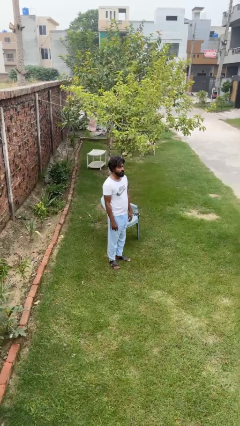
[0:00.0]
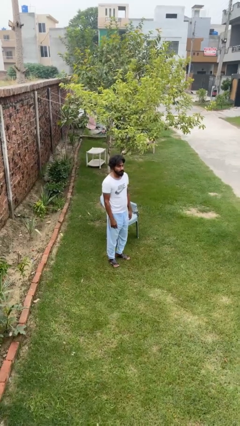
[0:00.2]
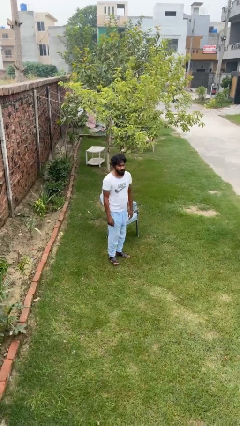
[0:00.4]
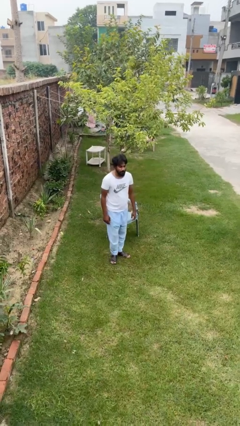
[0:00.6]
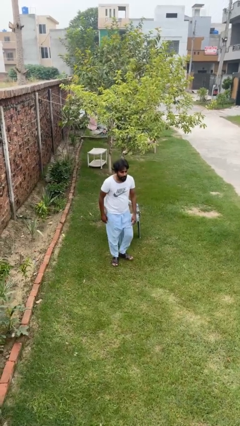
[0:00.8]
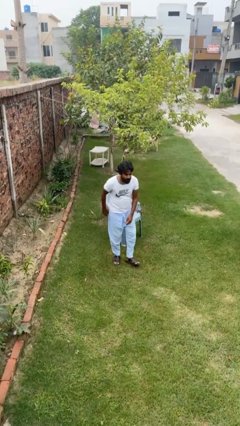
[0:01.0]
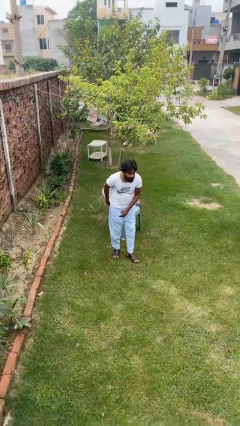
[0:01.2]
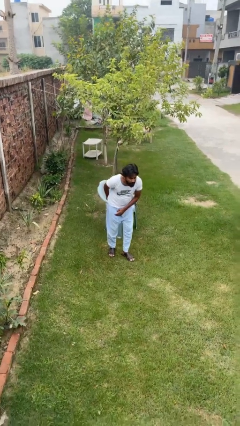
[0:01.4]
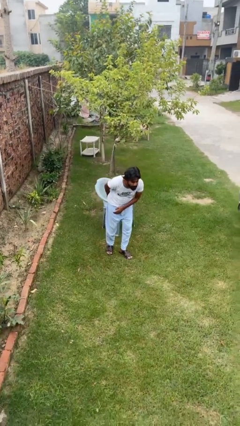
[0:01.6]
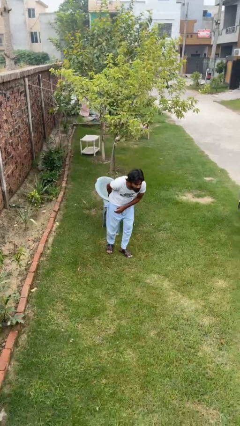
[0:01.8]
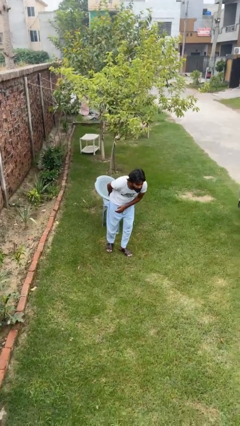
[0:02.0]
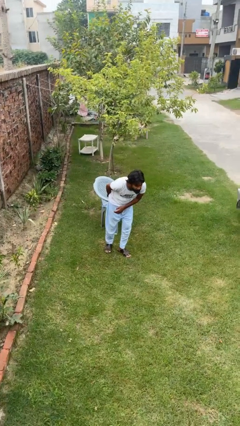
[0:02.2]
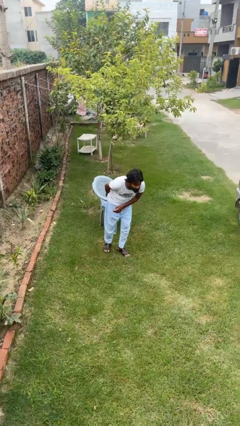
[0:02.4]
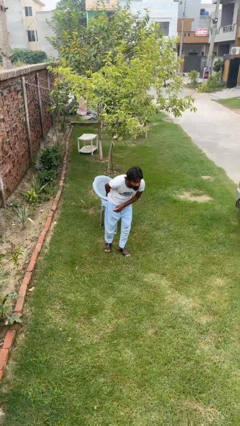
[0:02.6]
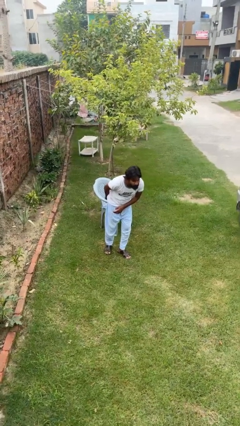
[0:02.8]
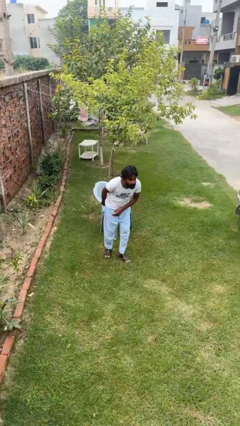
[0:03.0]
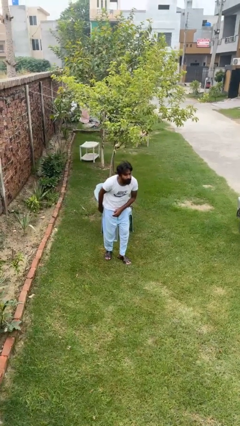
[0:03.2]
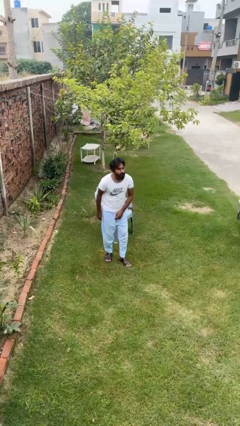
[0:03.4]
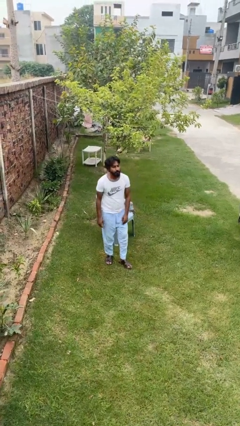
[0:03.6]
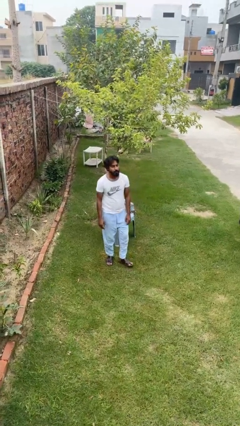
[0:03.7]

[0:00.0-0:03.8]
person bows

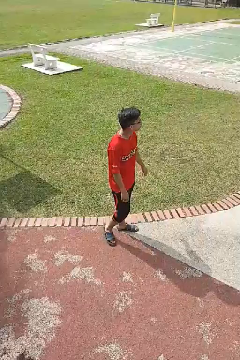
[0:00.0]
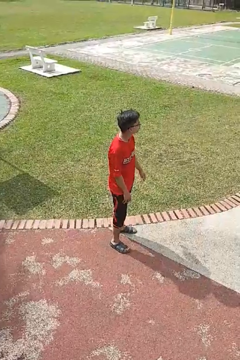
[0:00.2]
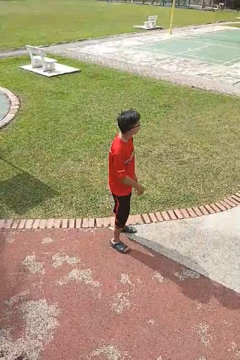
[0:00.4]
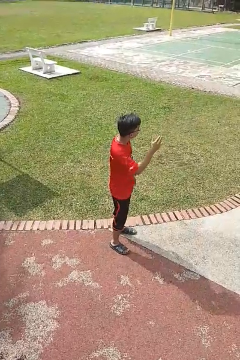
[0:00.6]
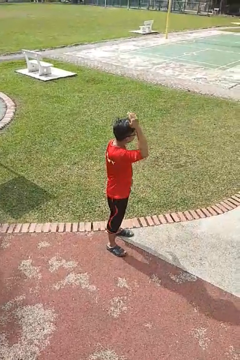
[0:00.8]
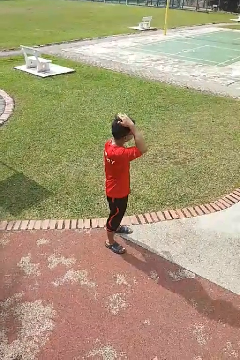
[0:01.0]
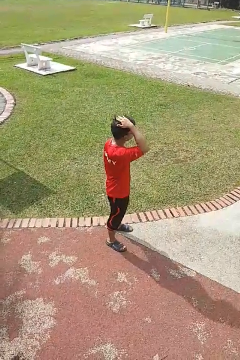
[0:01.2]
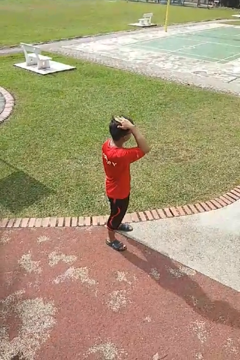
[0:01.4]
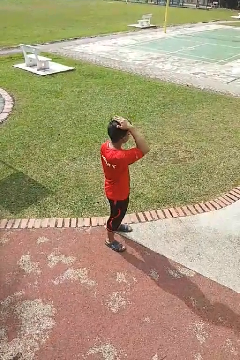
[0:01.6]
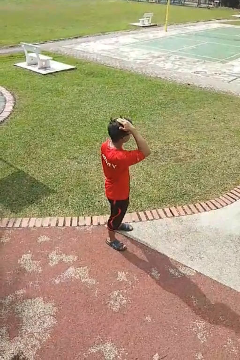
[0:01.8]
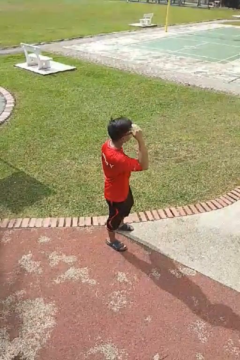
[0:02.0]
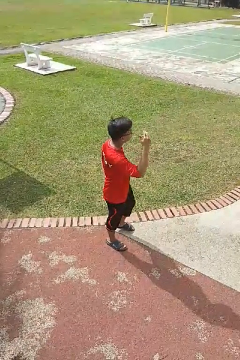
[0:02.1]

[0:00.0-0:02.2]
person pats head

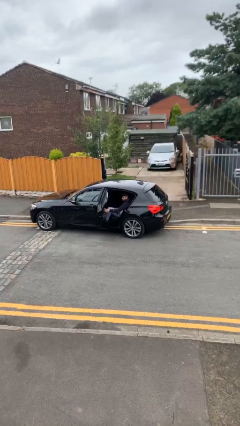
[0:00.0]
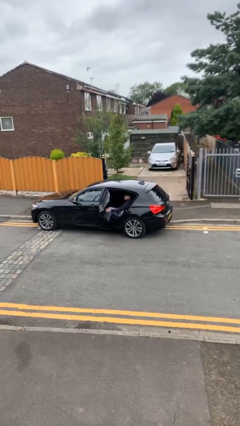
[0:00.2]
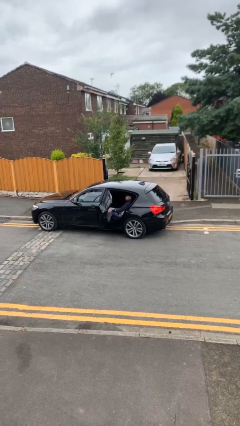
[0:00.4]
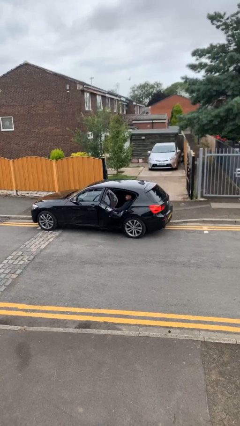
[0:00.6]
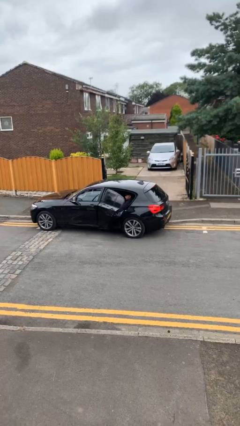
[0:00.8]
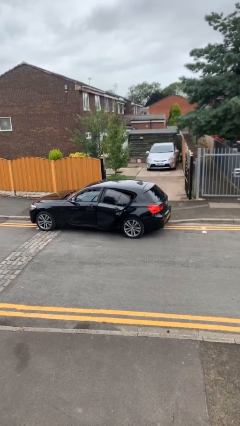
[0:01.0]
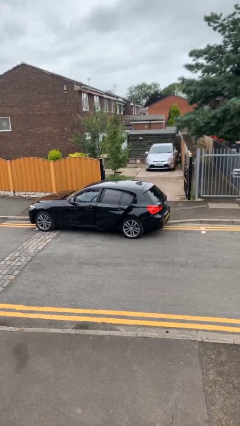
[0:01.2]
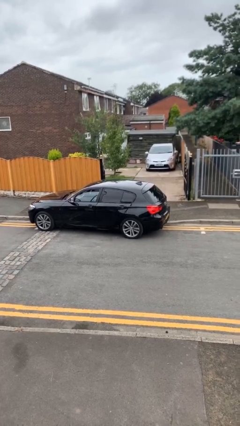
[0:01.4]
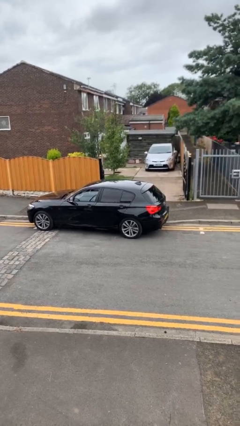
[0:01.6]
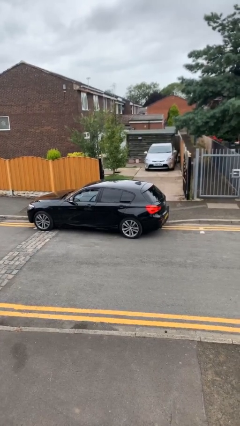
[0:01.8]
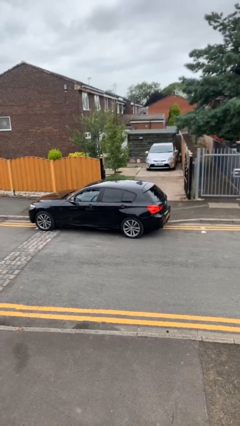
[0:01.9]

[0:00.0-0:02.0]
person closes car door

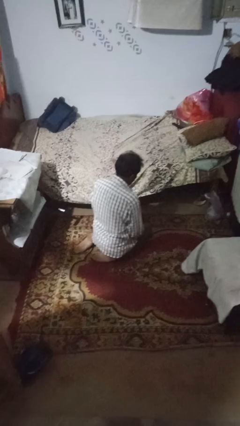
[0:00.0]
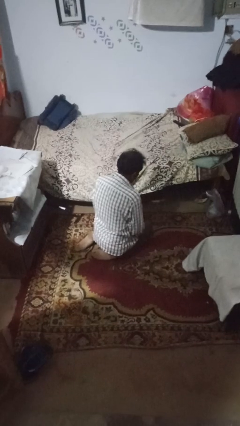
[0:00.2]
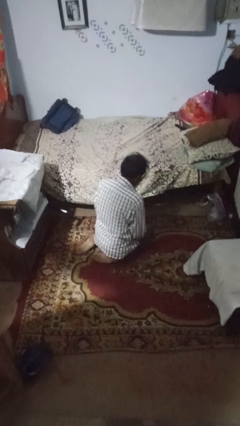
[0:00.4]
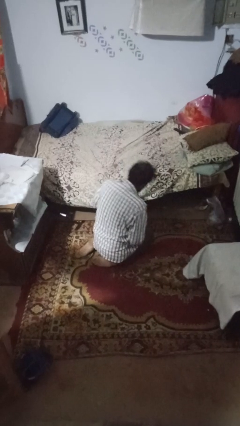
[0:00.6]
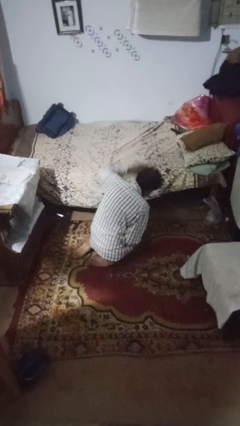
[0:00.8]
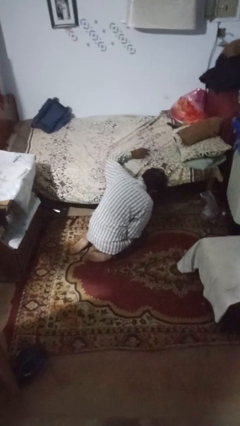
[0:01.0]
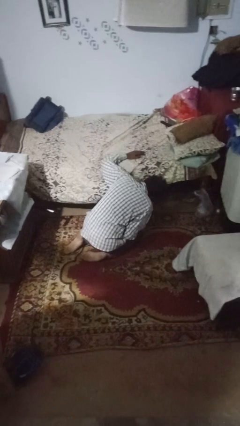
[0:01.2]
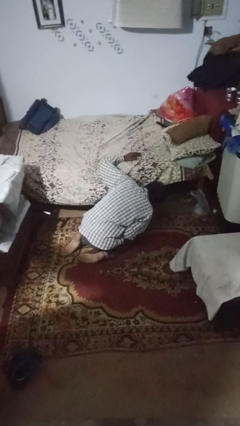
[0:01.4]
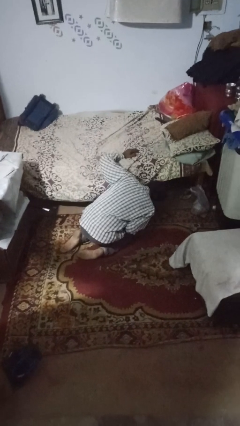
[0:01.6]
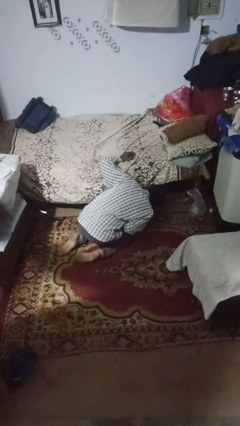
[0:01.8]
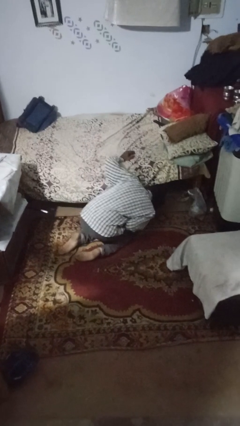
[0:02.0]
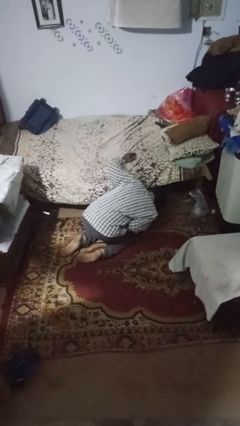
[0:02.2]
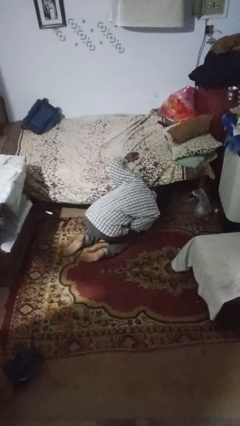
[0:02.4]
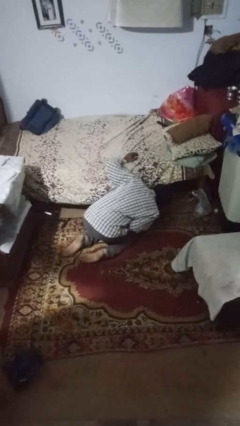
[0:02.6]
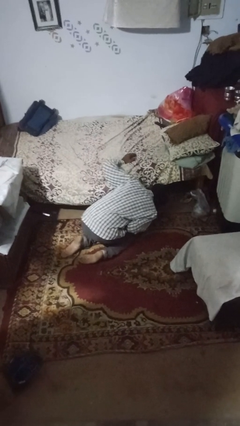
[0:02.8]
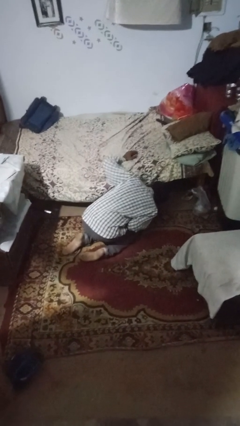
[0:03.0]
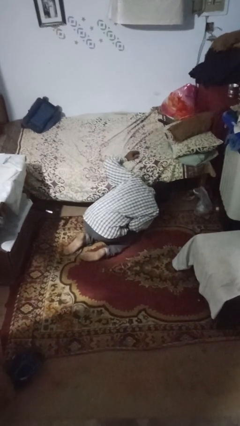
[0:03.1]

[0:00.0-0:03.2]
person searches under bed

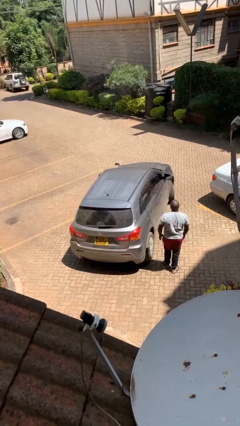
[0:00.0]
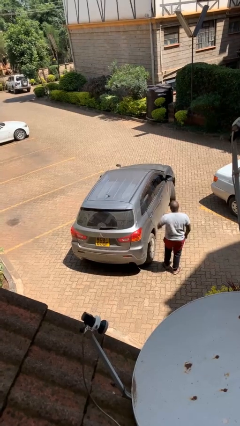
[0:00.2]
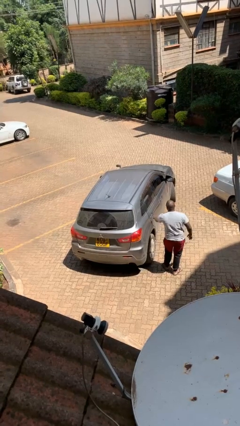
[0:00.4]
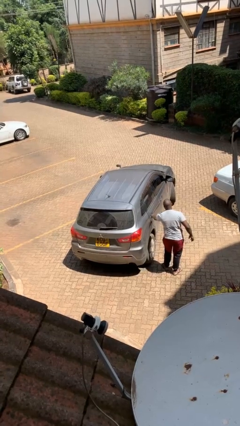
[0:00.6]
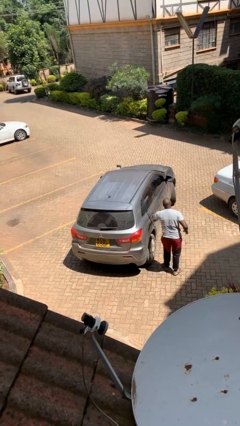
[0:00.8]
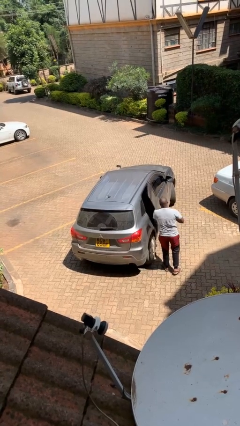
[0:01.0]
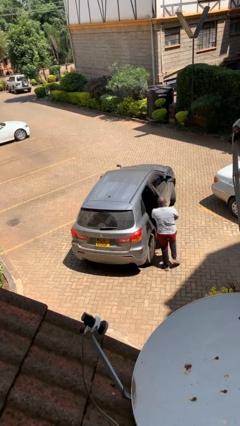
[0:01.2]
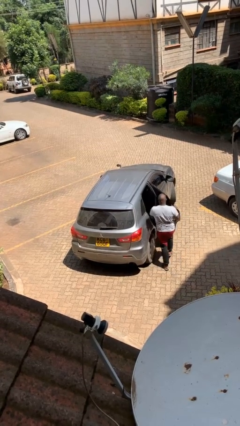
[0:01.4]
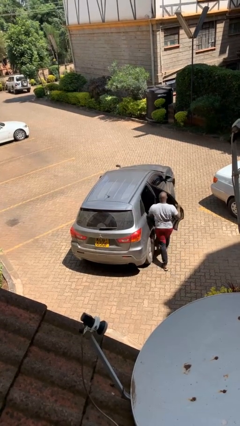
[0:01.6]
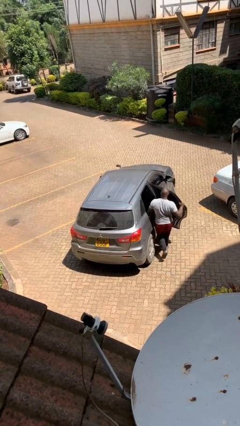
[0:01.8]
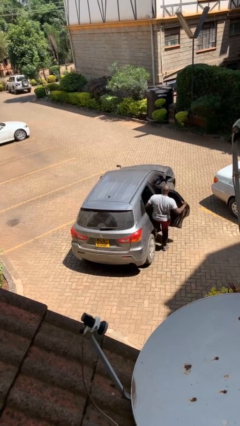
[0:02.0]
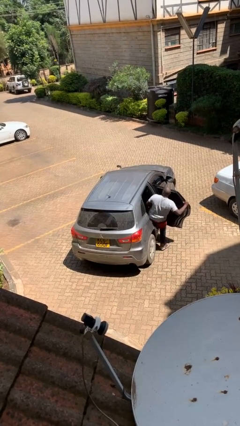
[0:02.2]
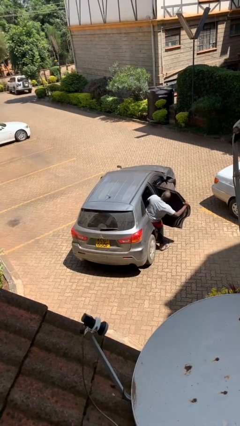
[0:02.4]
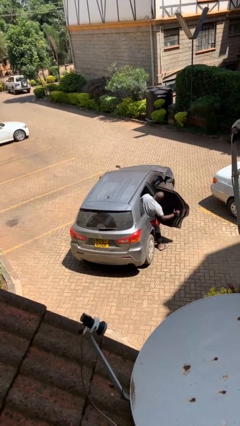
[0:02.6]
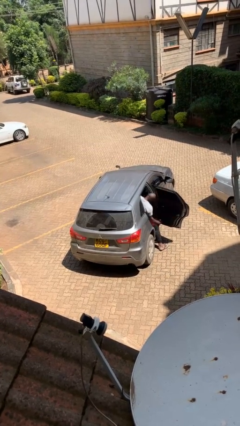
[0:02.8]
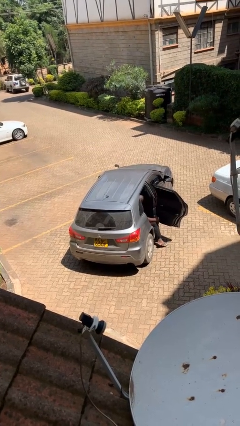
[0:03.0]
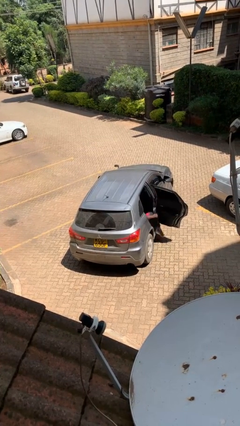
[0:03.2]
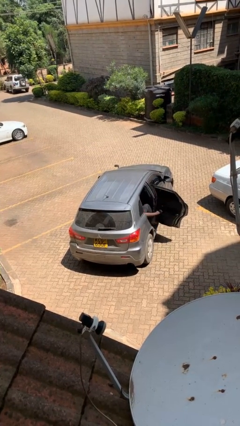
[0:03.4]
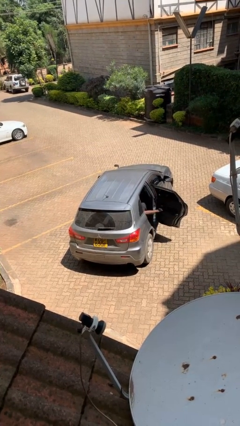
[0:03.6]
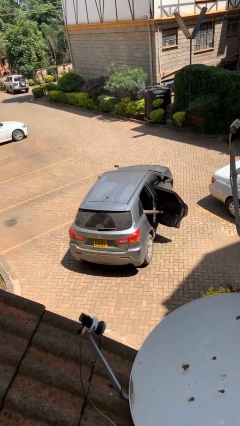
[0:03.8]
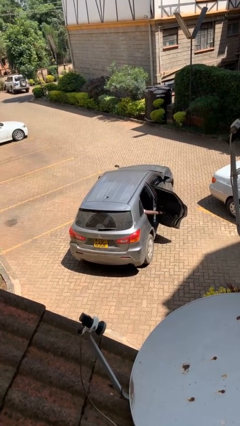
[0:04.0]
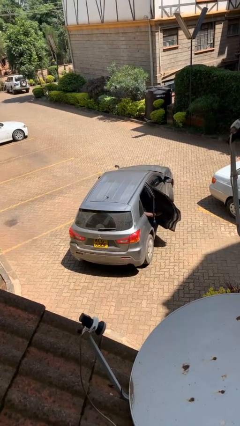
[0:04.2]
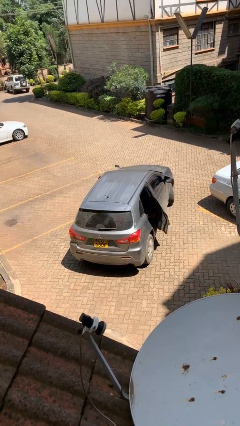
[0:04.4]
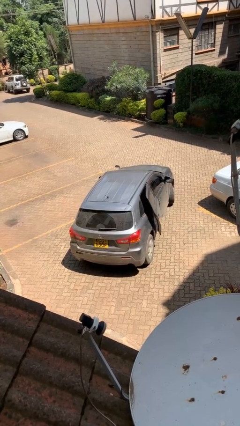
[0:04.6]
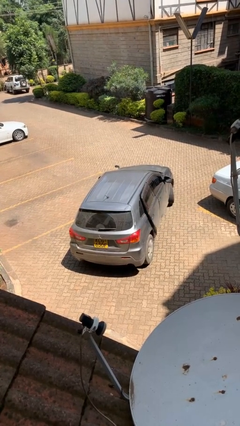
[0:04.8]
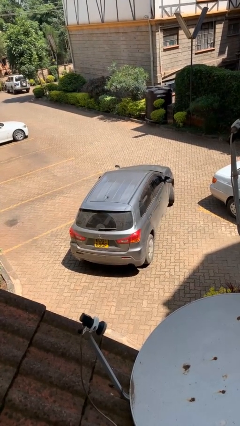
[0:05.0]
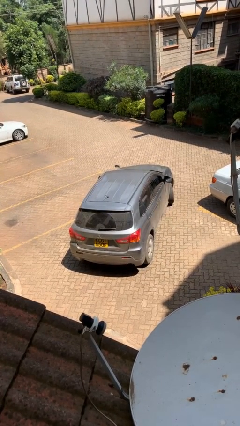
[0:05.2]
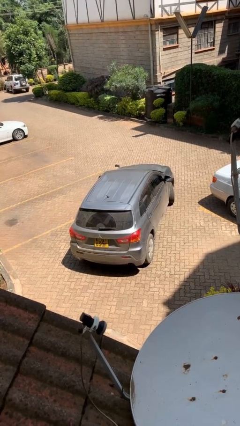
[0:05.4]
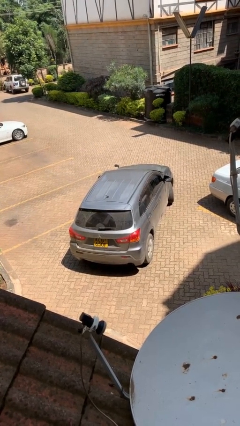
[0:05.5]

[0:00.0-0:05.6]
car picks up person

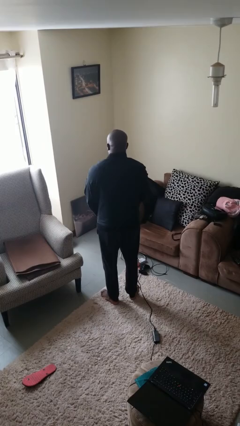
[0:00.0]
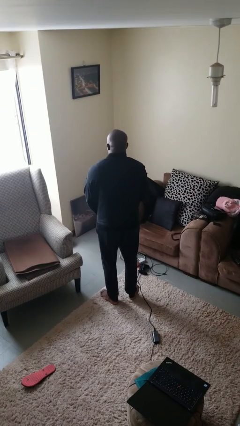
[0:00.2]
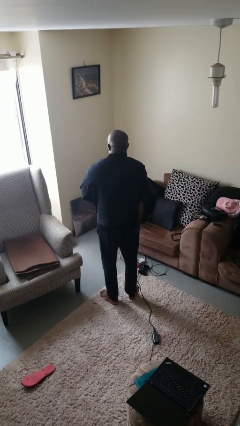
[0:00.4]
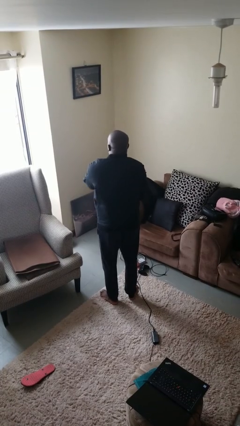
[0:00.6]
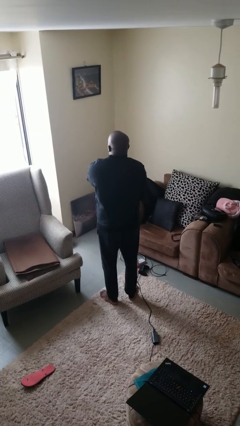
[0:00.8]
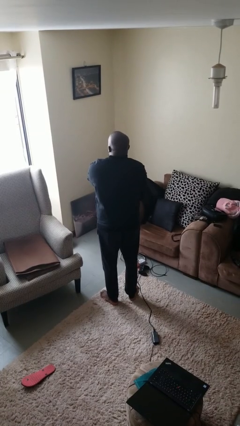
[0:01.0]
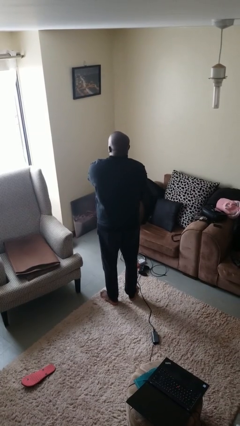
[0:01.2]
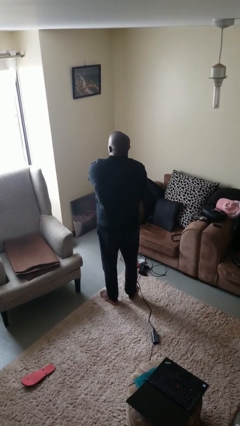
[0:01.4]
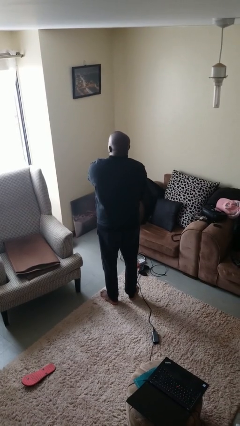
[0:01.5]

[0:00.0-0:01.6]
person zips up jacket
